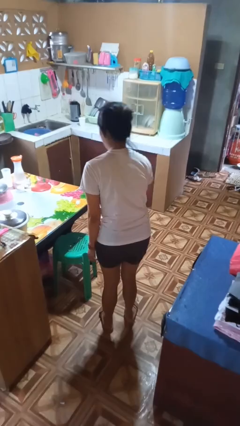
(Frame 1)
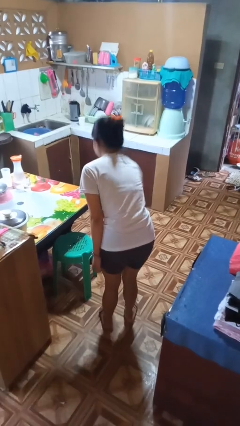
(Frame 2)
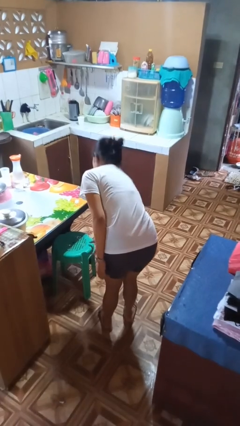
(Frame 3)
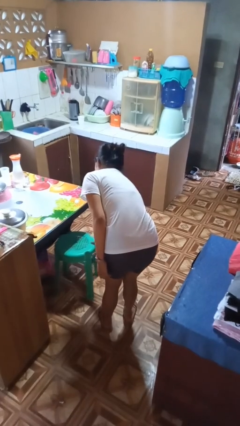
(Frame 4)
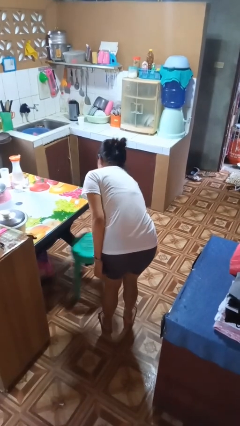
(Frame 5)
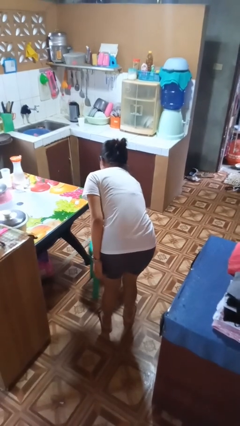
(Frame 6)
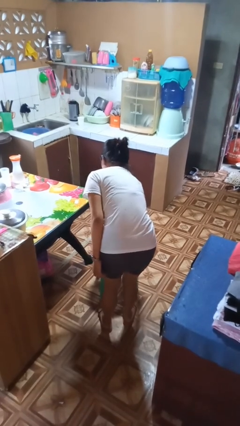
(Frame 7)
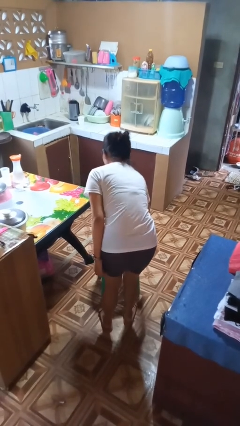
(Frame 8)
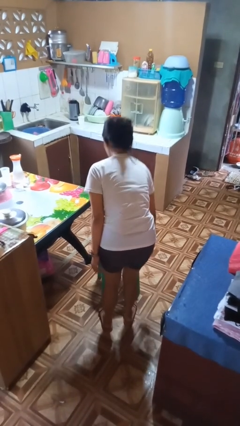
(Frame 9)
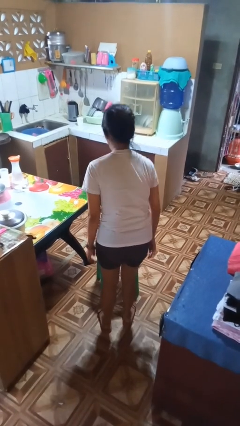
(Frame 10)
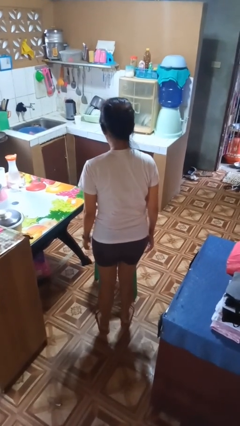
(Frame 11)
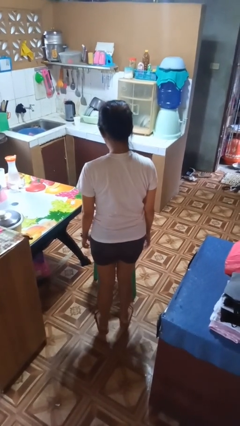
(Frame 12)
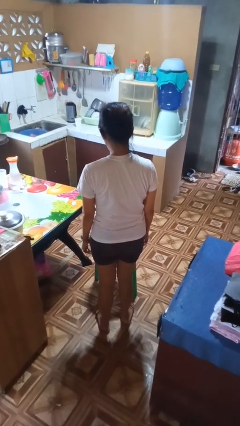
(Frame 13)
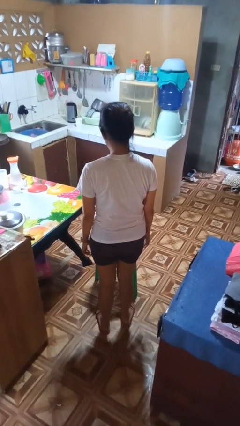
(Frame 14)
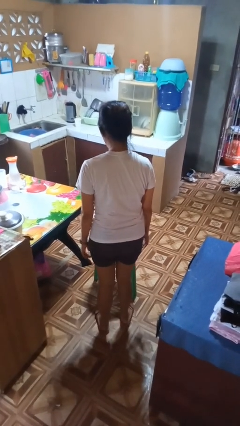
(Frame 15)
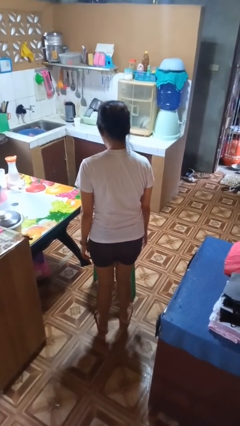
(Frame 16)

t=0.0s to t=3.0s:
person pulls out chair

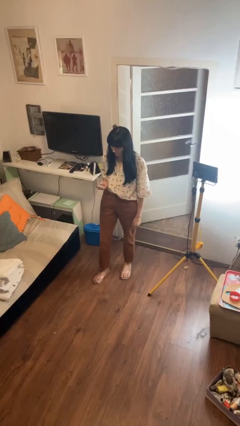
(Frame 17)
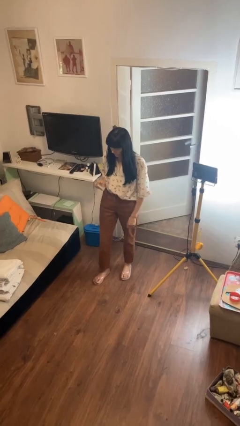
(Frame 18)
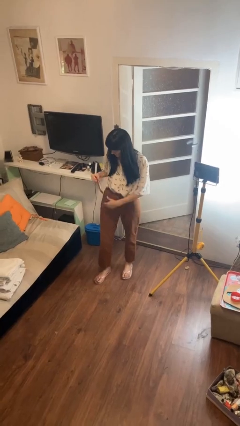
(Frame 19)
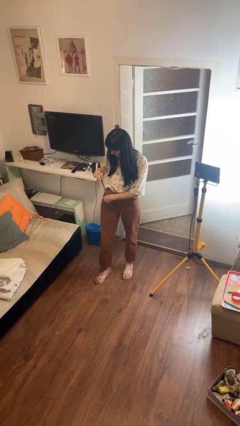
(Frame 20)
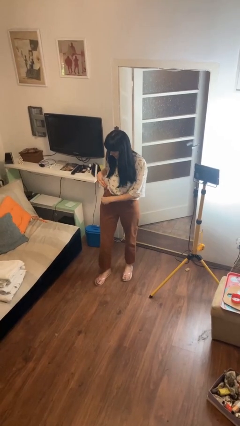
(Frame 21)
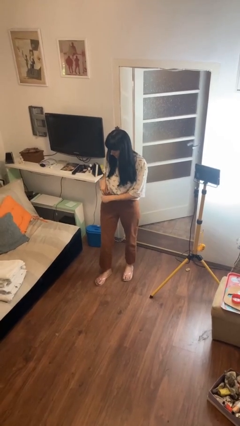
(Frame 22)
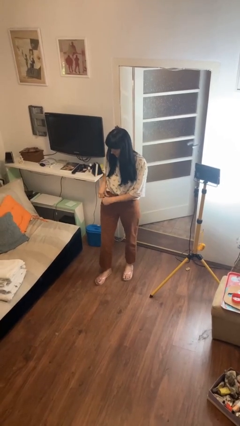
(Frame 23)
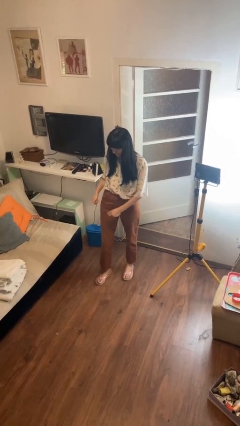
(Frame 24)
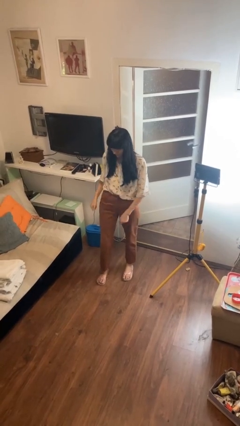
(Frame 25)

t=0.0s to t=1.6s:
person puts phone into pocket

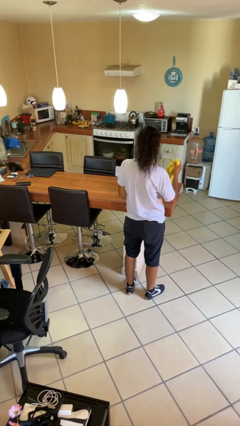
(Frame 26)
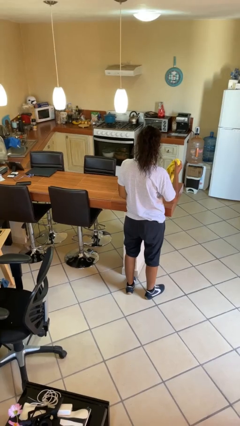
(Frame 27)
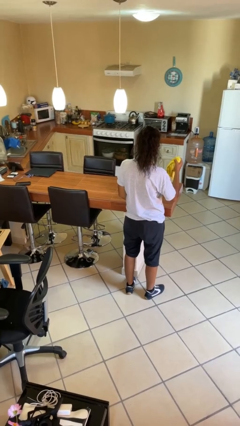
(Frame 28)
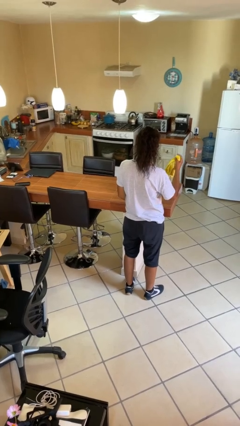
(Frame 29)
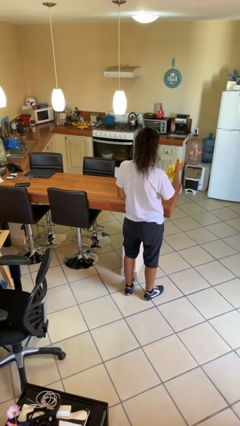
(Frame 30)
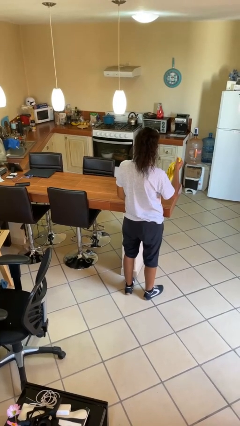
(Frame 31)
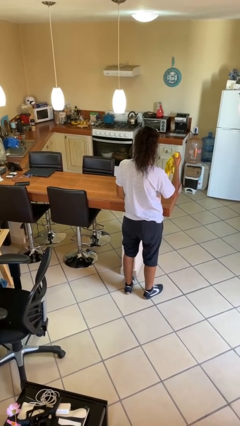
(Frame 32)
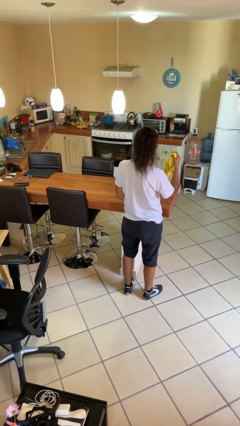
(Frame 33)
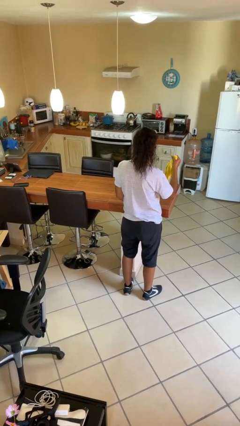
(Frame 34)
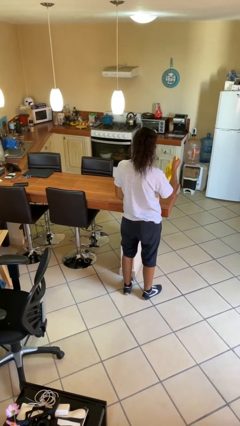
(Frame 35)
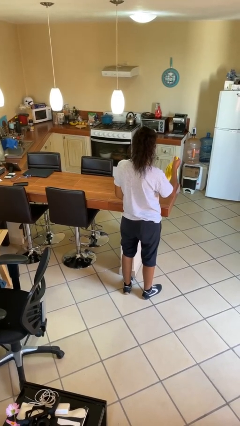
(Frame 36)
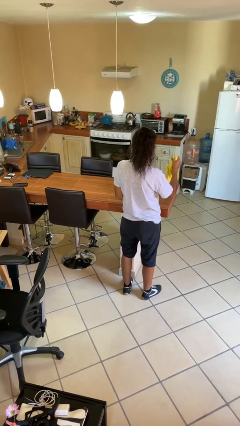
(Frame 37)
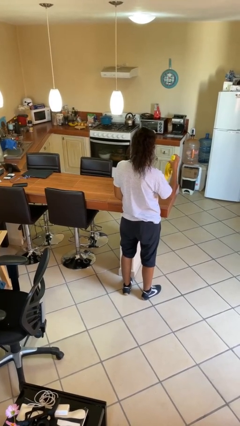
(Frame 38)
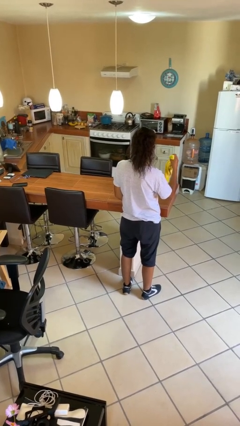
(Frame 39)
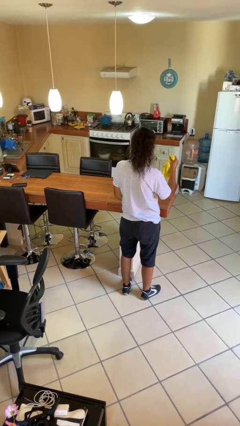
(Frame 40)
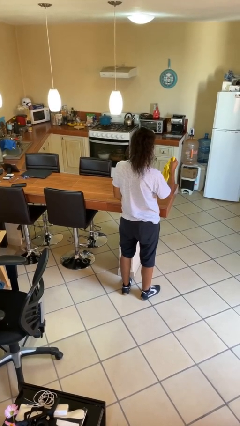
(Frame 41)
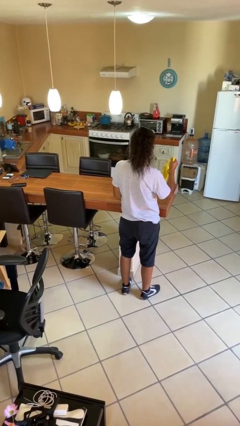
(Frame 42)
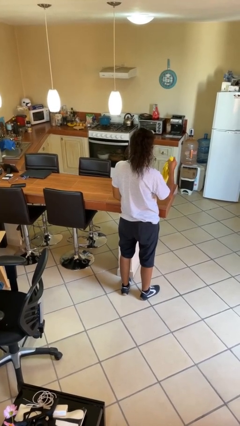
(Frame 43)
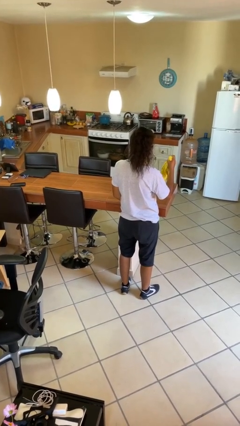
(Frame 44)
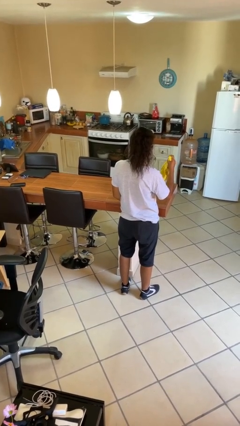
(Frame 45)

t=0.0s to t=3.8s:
person squeezes object

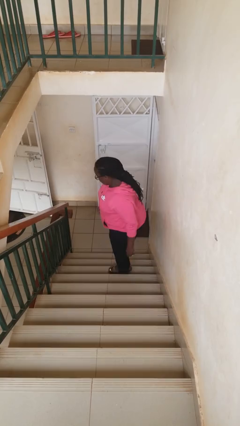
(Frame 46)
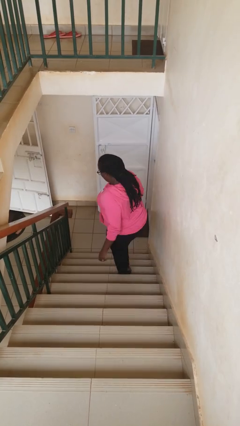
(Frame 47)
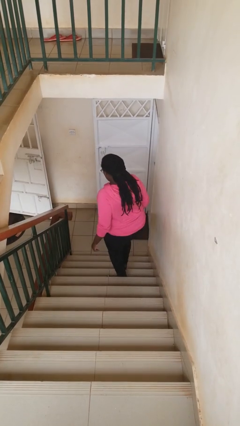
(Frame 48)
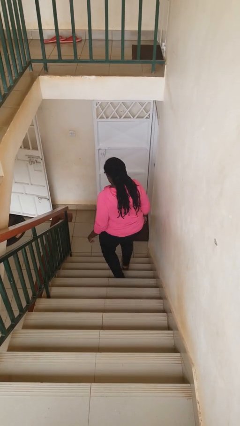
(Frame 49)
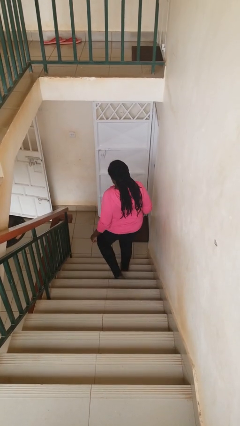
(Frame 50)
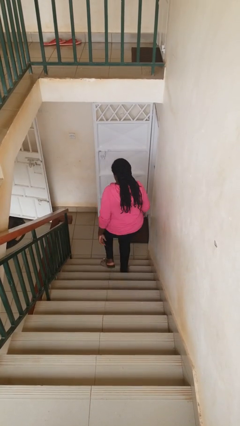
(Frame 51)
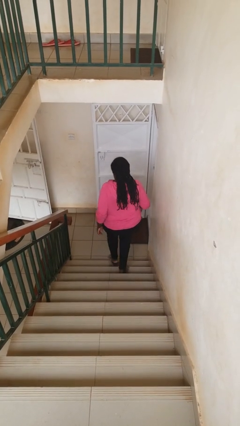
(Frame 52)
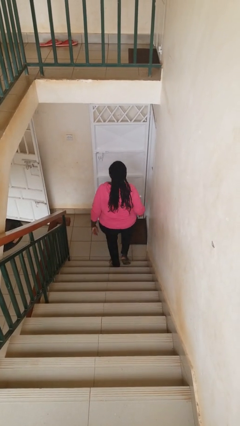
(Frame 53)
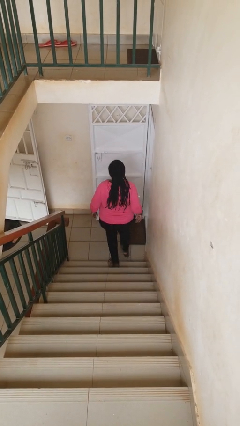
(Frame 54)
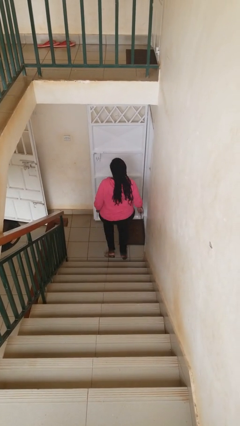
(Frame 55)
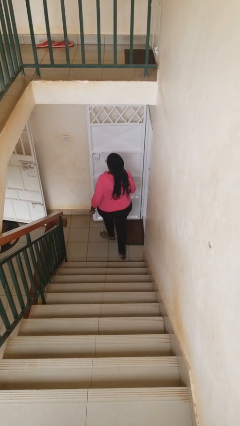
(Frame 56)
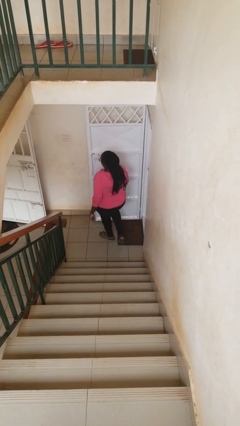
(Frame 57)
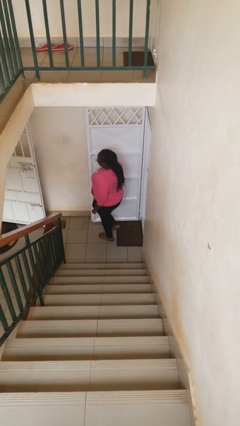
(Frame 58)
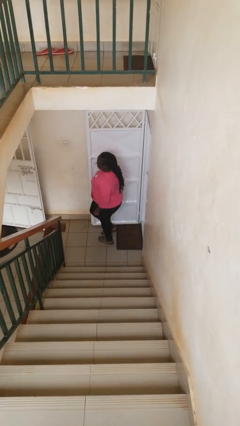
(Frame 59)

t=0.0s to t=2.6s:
person climbs down stairs

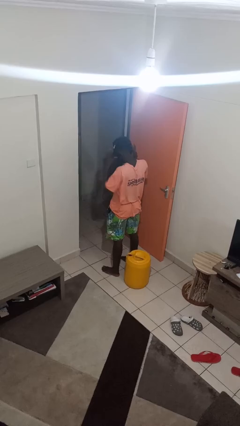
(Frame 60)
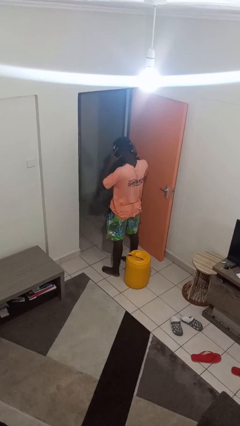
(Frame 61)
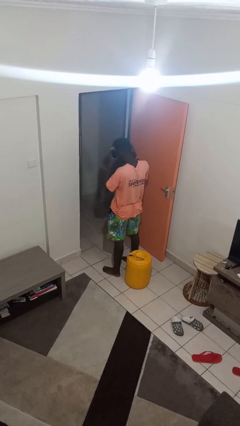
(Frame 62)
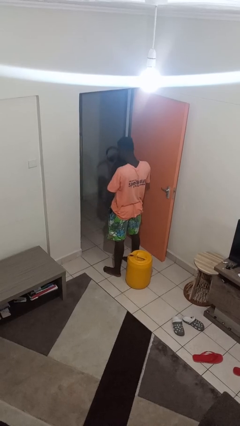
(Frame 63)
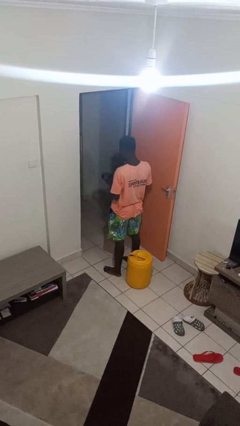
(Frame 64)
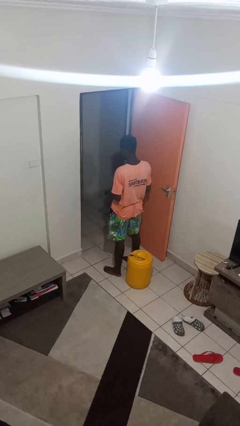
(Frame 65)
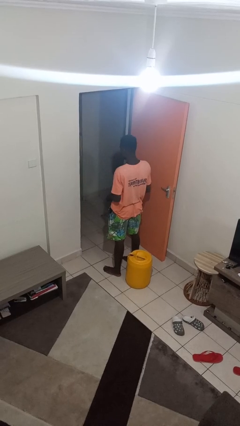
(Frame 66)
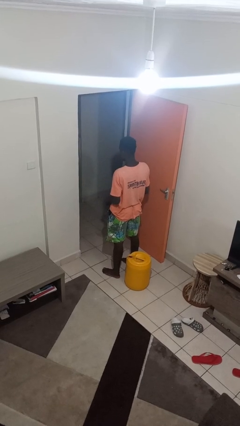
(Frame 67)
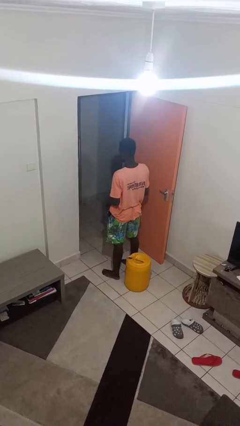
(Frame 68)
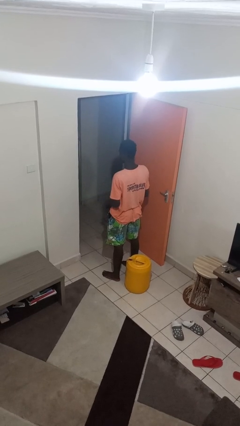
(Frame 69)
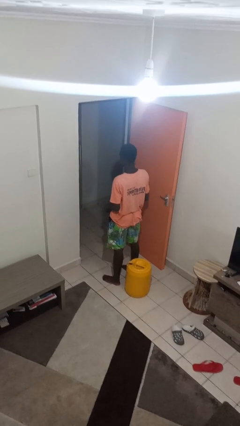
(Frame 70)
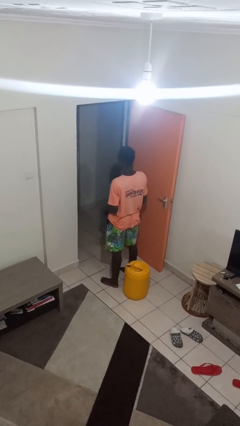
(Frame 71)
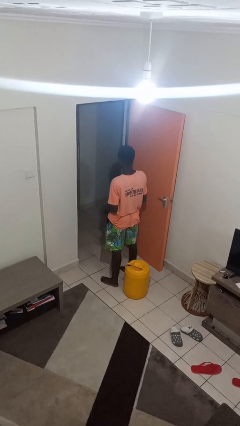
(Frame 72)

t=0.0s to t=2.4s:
person takes off headphones

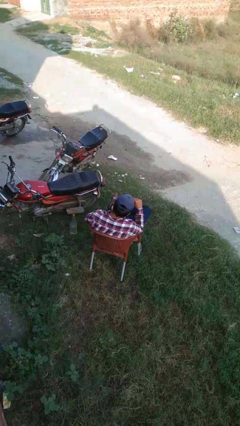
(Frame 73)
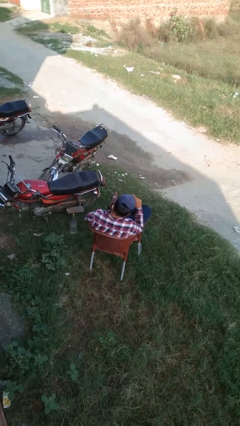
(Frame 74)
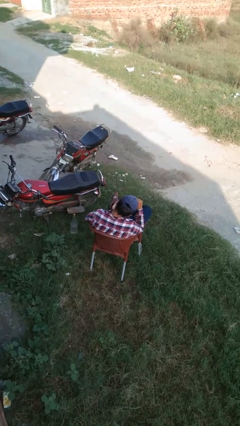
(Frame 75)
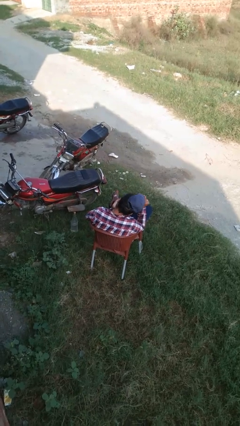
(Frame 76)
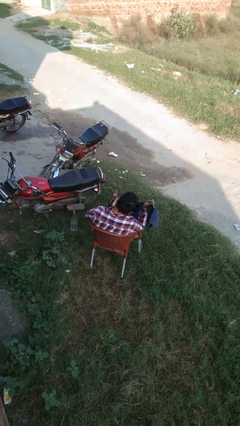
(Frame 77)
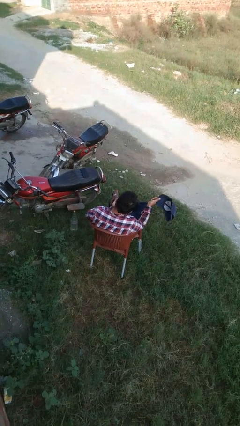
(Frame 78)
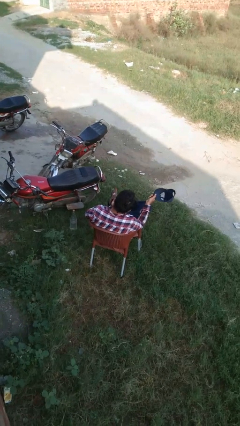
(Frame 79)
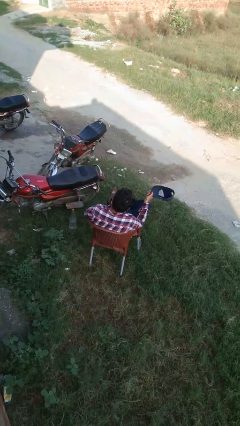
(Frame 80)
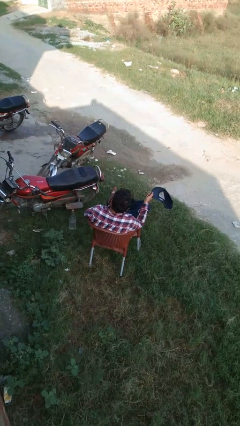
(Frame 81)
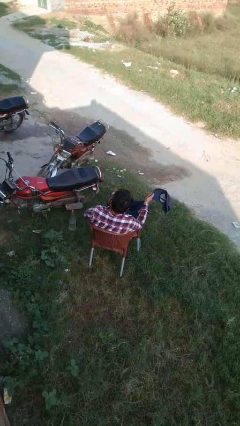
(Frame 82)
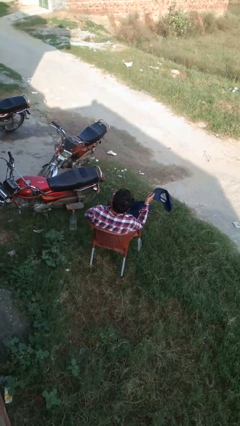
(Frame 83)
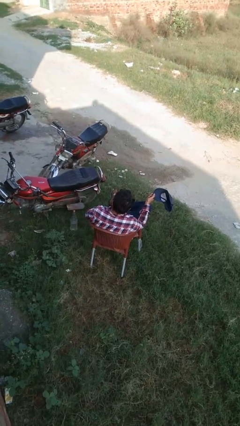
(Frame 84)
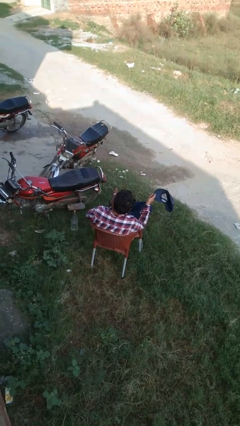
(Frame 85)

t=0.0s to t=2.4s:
person takes off hat

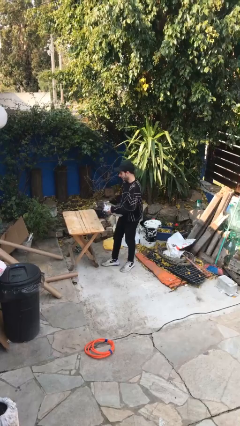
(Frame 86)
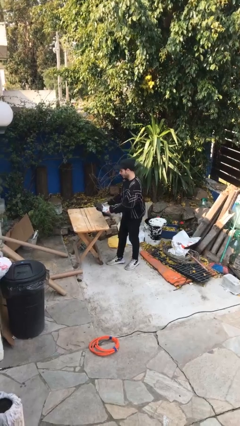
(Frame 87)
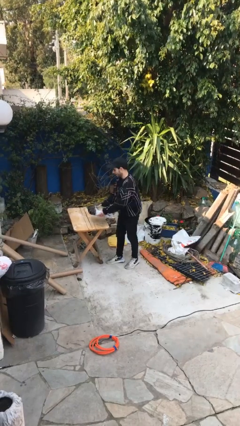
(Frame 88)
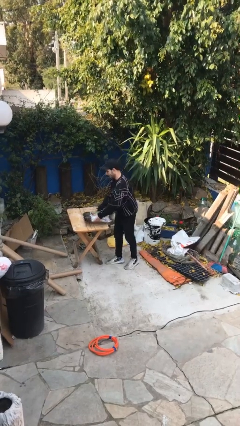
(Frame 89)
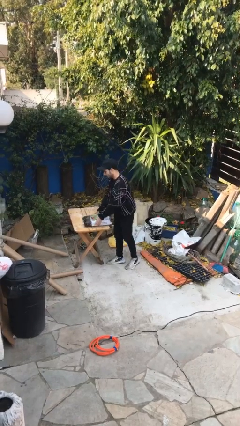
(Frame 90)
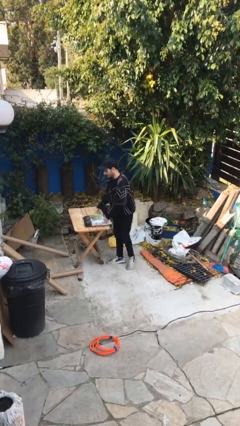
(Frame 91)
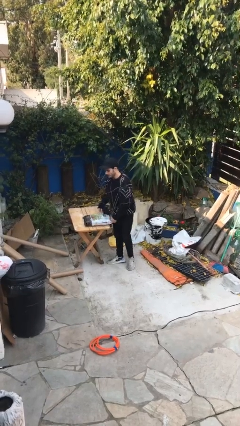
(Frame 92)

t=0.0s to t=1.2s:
person puts down object on table
